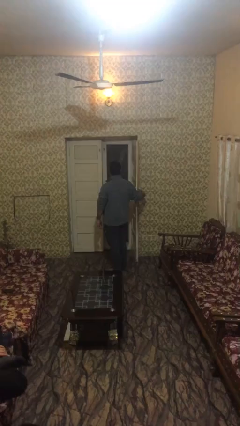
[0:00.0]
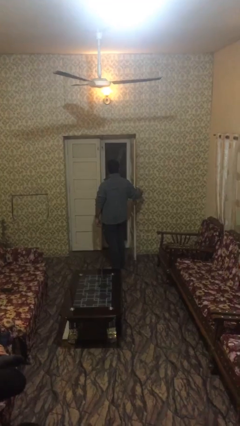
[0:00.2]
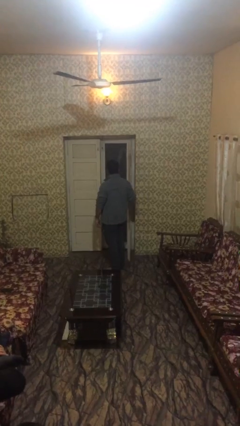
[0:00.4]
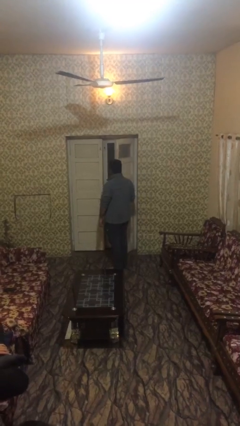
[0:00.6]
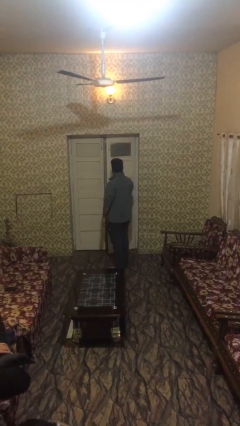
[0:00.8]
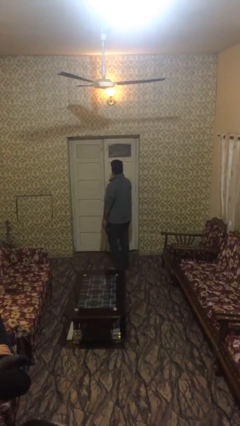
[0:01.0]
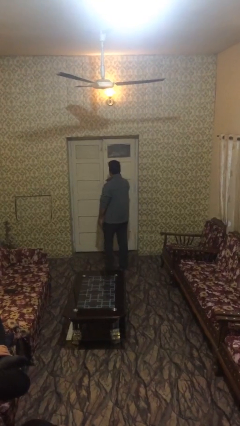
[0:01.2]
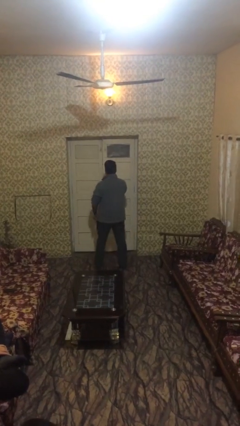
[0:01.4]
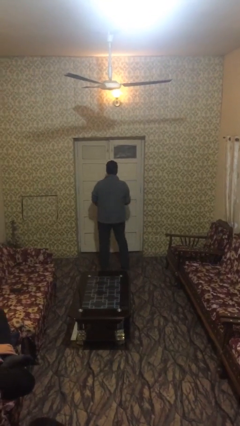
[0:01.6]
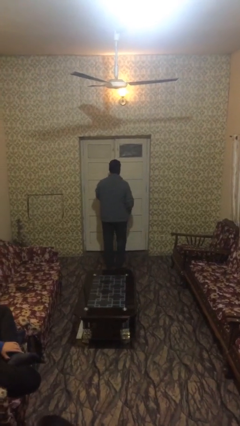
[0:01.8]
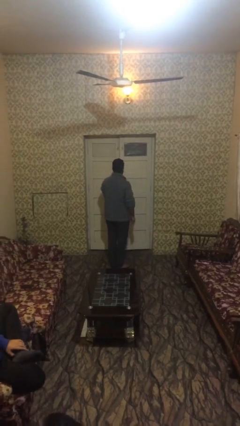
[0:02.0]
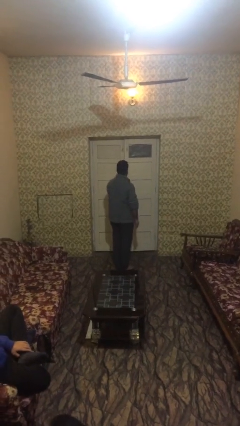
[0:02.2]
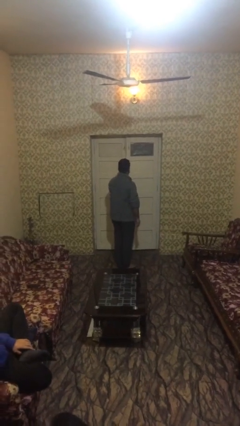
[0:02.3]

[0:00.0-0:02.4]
person closes facility door

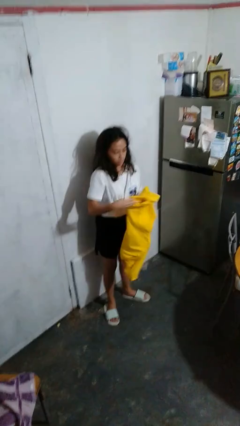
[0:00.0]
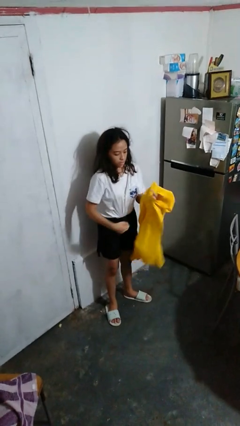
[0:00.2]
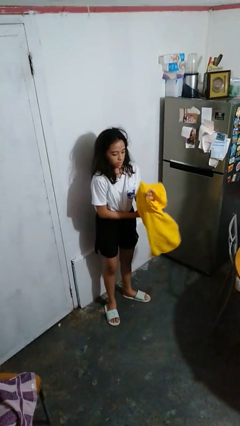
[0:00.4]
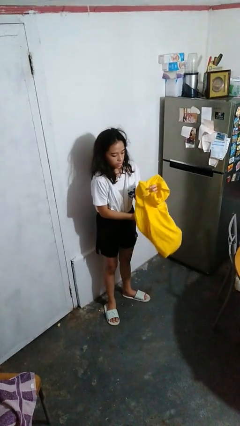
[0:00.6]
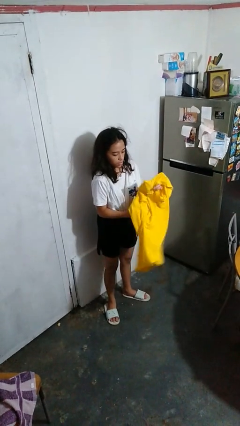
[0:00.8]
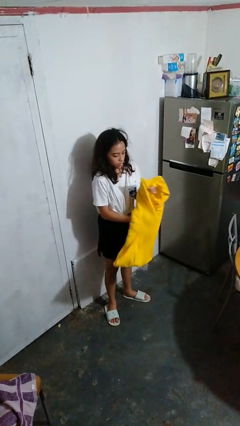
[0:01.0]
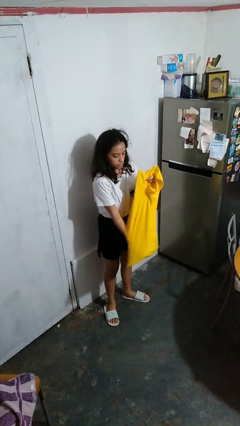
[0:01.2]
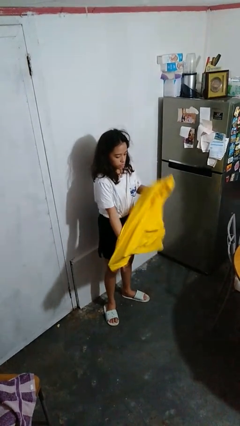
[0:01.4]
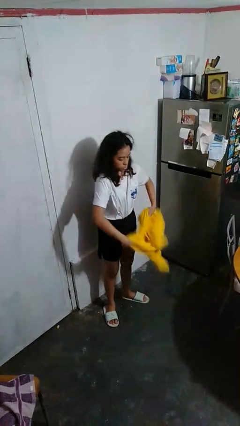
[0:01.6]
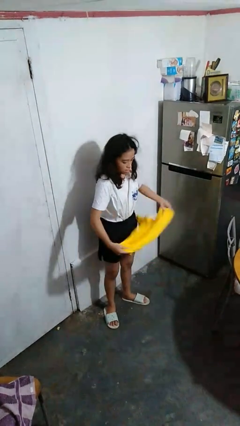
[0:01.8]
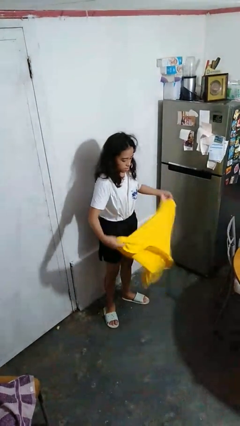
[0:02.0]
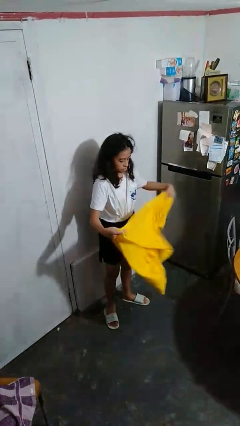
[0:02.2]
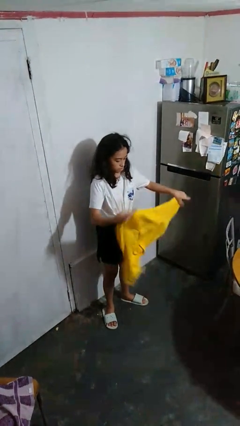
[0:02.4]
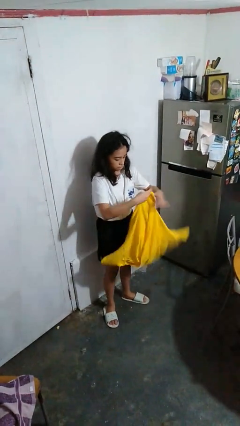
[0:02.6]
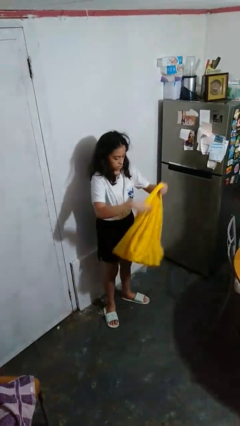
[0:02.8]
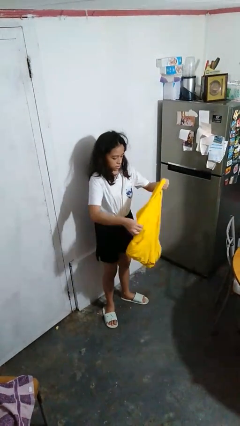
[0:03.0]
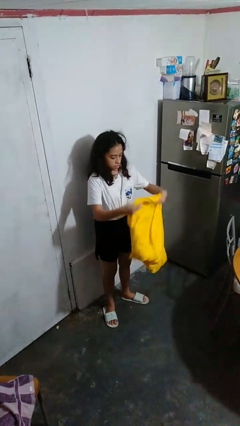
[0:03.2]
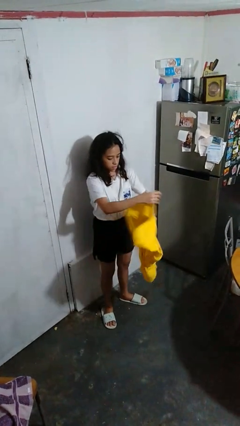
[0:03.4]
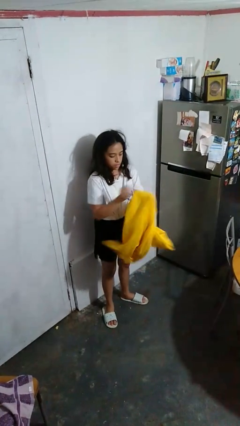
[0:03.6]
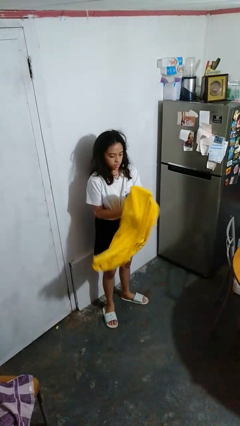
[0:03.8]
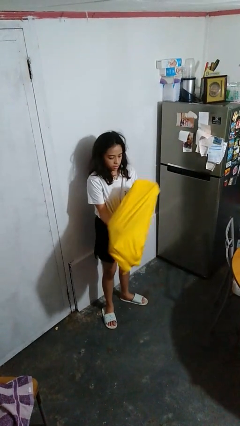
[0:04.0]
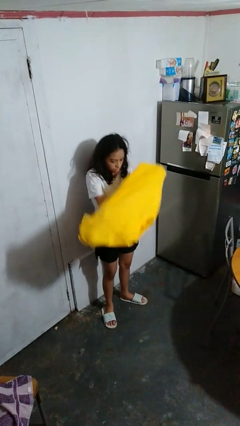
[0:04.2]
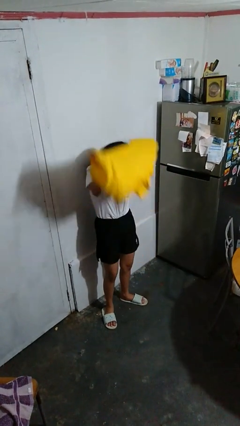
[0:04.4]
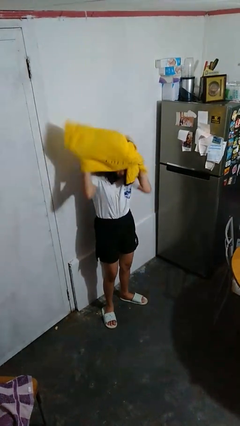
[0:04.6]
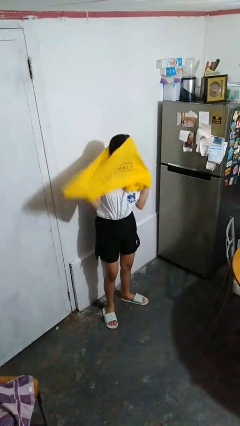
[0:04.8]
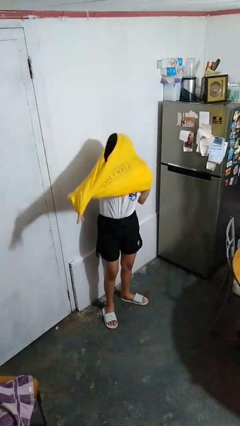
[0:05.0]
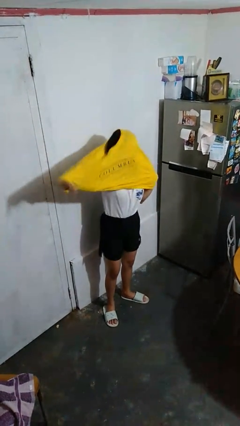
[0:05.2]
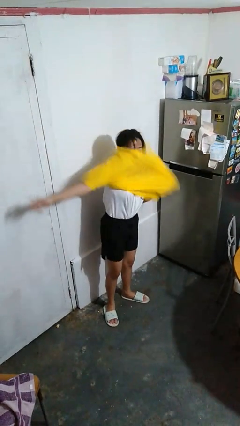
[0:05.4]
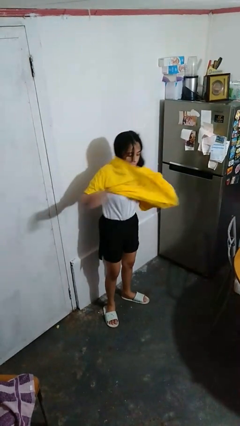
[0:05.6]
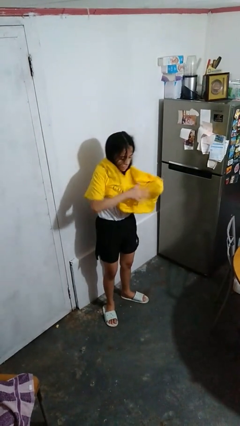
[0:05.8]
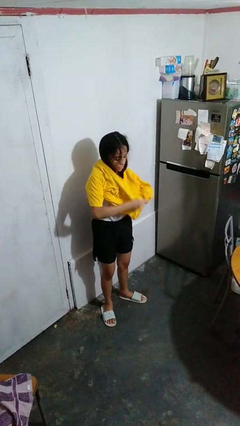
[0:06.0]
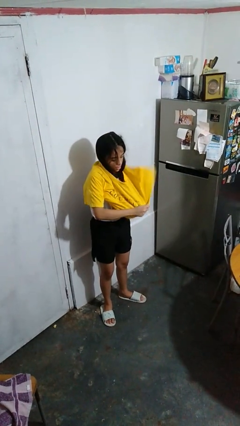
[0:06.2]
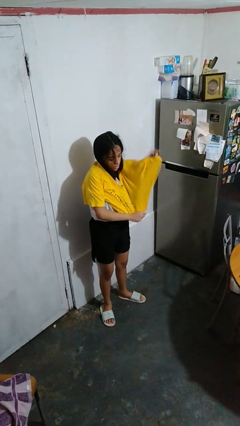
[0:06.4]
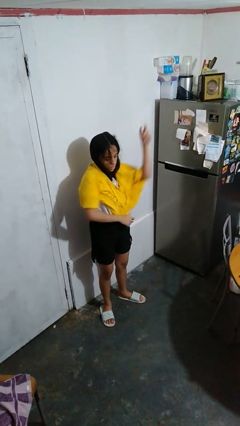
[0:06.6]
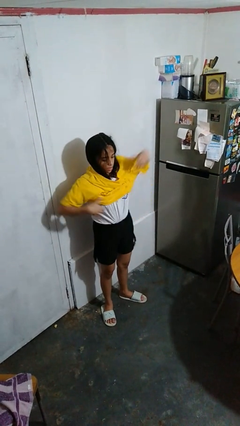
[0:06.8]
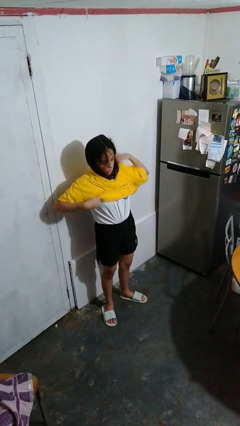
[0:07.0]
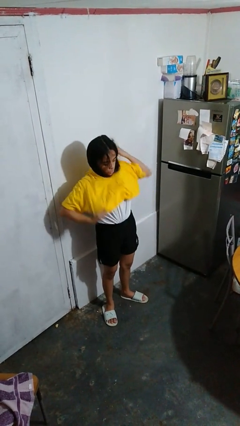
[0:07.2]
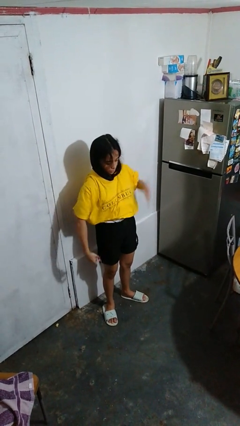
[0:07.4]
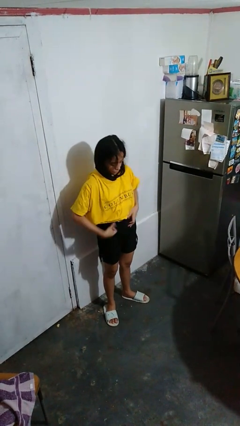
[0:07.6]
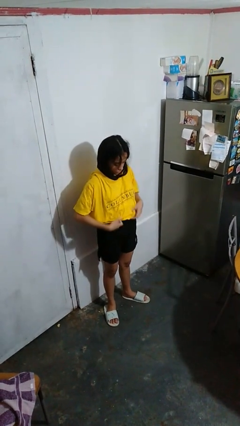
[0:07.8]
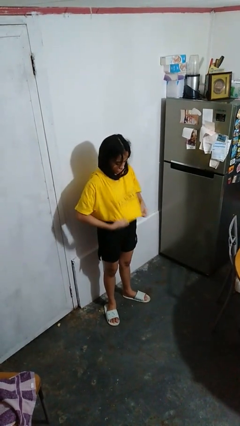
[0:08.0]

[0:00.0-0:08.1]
person puts on shirt

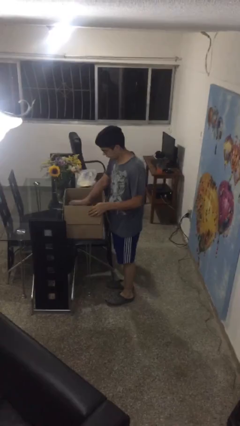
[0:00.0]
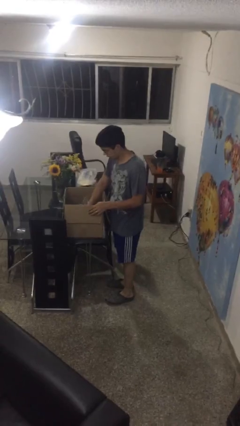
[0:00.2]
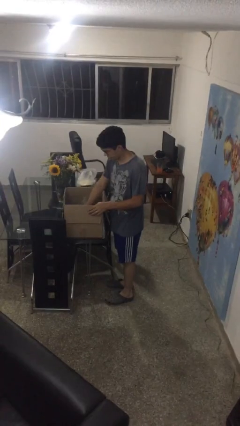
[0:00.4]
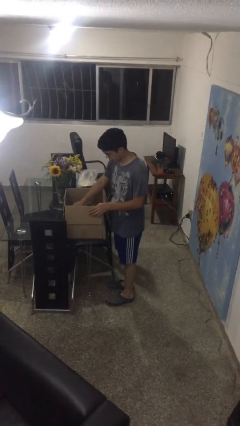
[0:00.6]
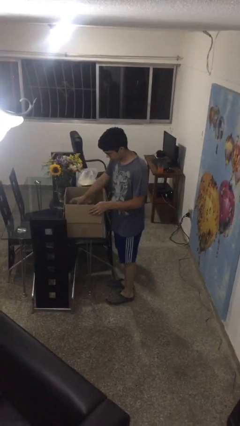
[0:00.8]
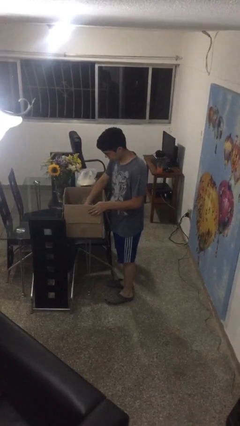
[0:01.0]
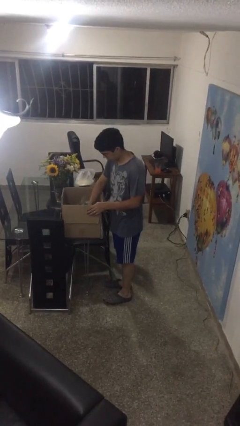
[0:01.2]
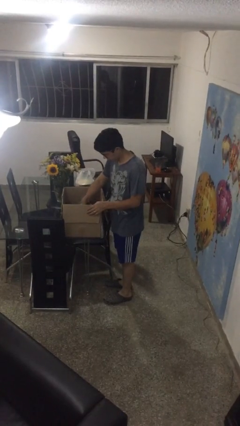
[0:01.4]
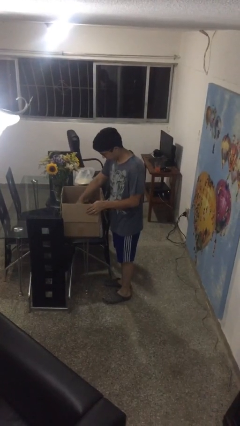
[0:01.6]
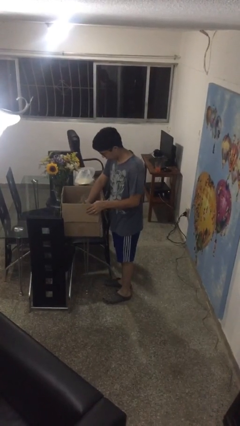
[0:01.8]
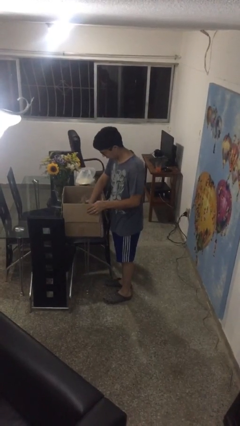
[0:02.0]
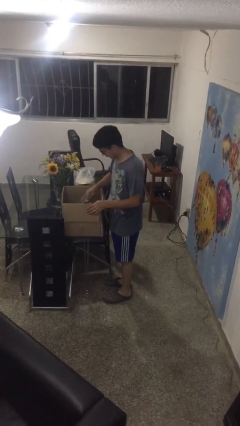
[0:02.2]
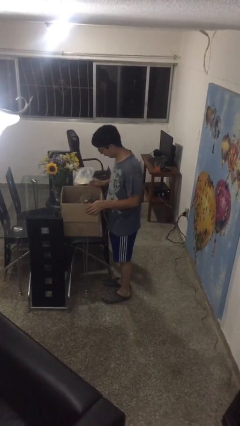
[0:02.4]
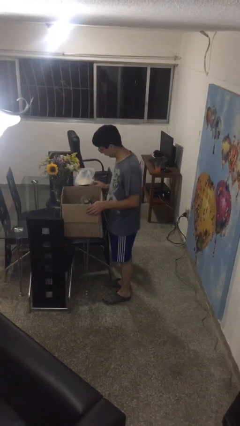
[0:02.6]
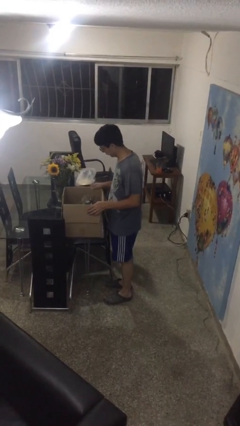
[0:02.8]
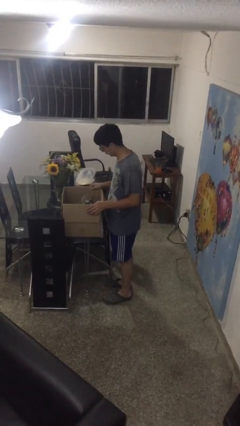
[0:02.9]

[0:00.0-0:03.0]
person searches in box

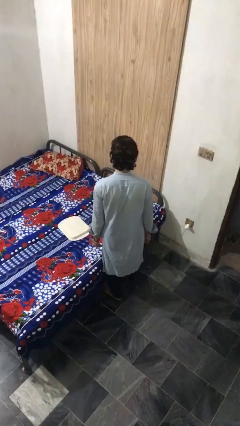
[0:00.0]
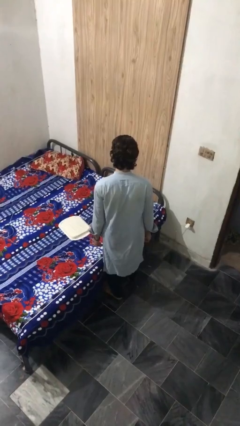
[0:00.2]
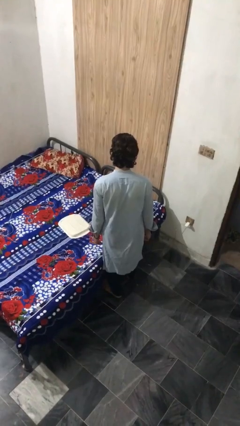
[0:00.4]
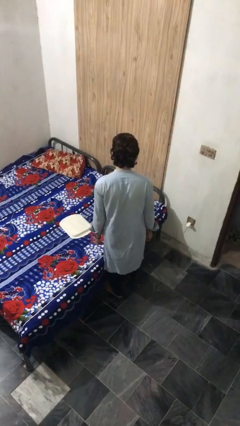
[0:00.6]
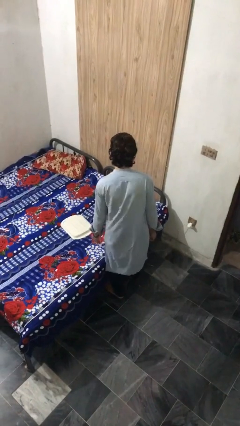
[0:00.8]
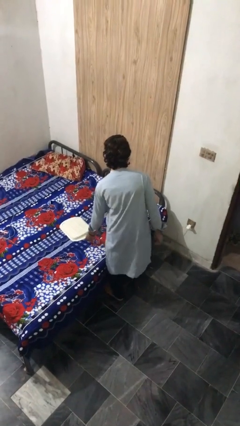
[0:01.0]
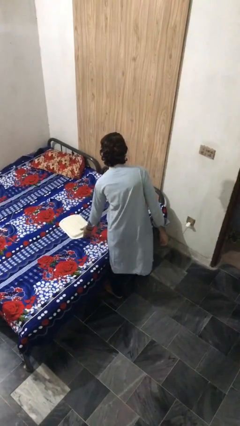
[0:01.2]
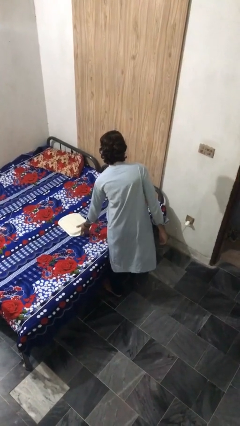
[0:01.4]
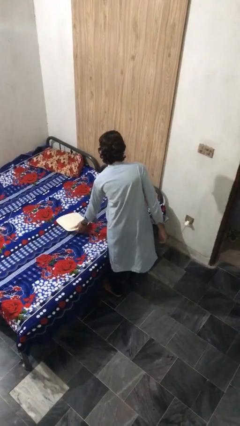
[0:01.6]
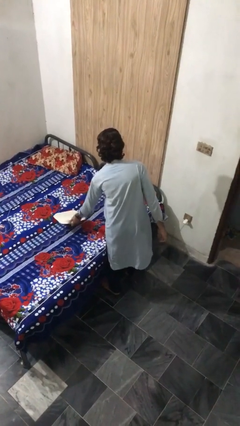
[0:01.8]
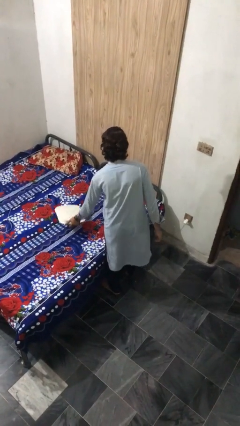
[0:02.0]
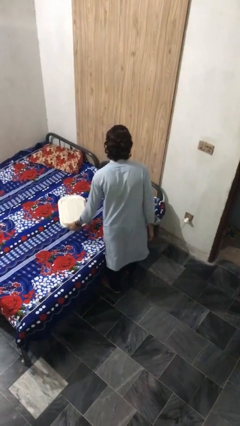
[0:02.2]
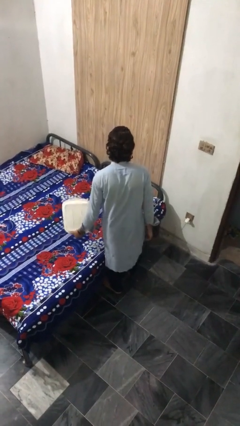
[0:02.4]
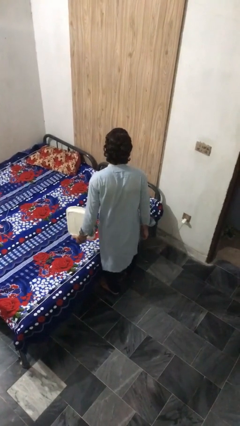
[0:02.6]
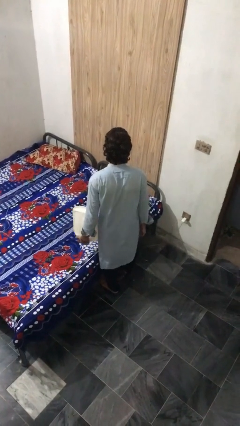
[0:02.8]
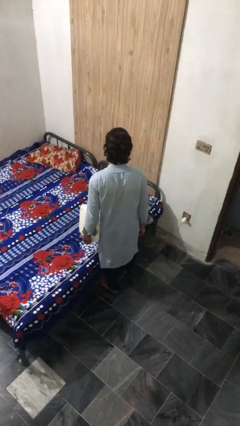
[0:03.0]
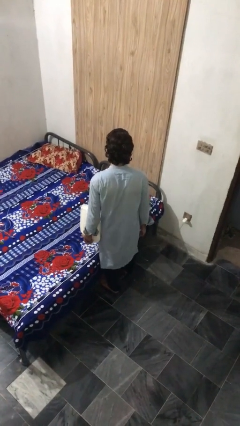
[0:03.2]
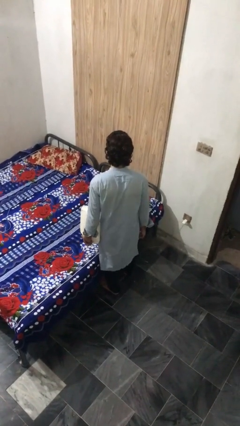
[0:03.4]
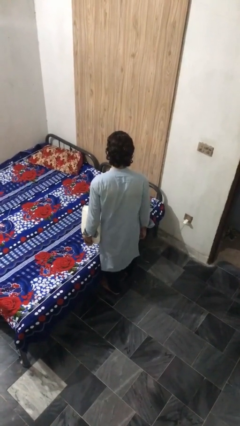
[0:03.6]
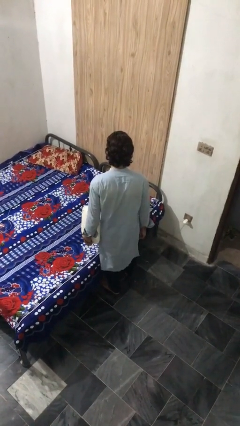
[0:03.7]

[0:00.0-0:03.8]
person picks up object from bed

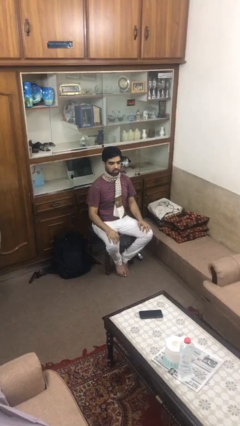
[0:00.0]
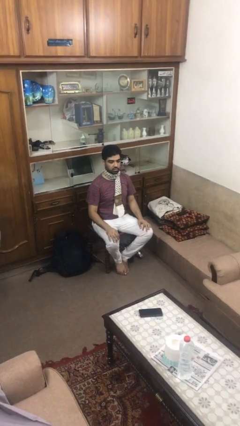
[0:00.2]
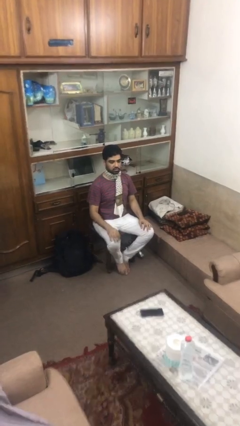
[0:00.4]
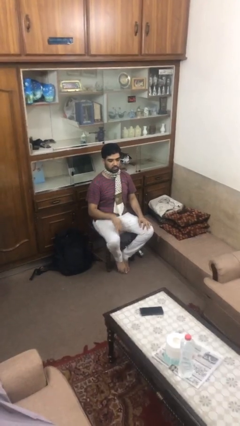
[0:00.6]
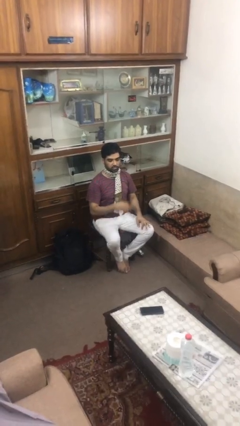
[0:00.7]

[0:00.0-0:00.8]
person takes off scarf
